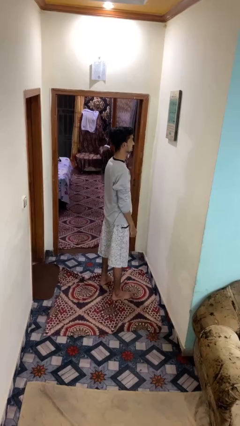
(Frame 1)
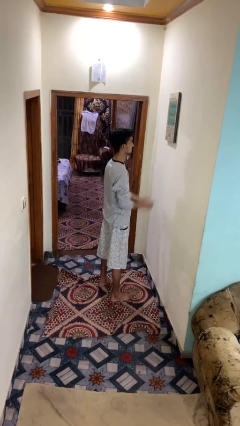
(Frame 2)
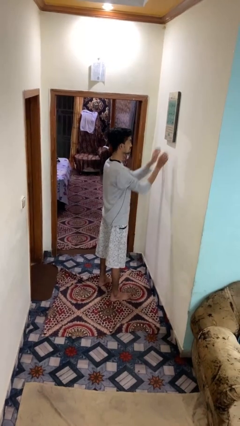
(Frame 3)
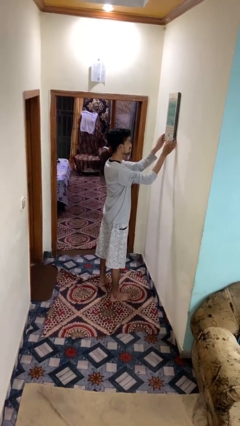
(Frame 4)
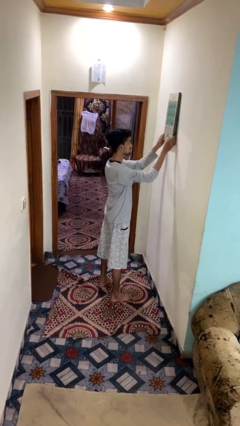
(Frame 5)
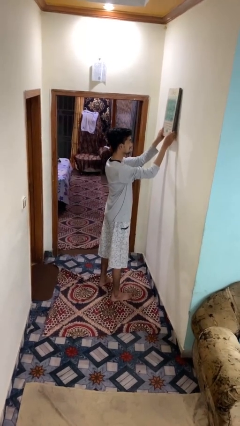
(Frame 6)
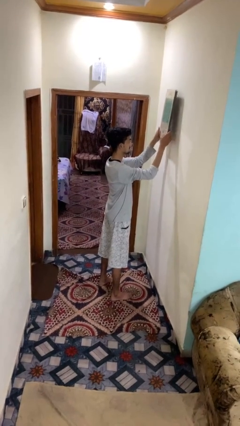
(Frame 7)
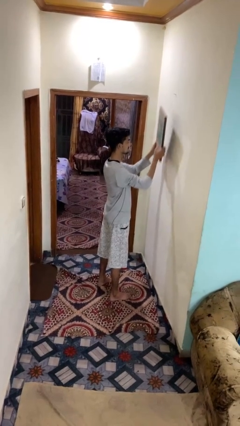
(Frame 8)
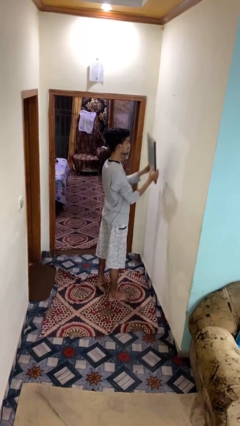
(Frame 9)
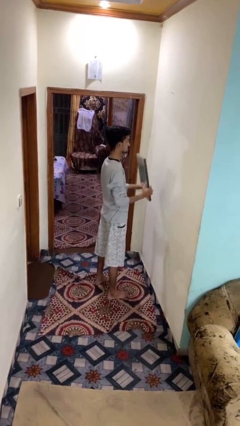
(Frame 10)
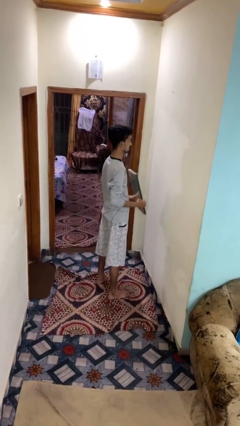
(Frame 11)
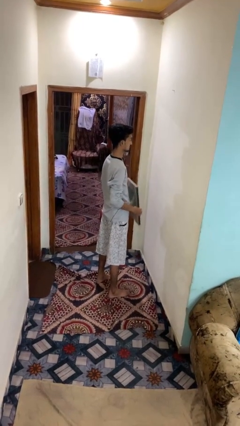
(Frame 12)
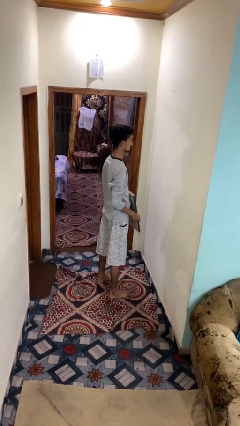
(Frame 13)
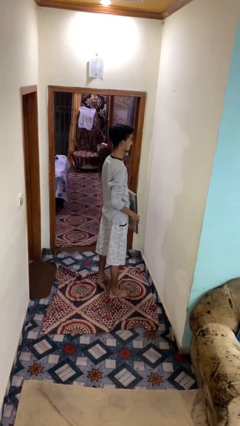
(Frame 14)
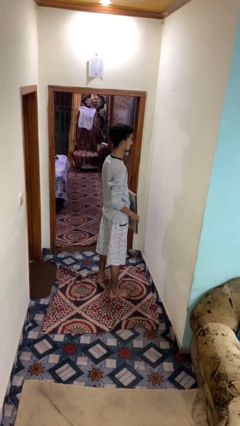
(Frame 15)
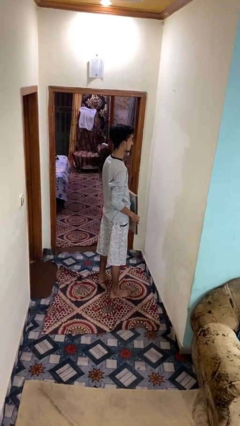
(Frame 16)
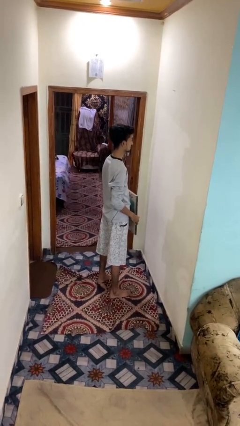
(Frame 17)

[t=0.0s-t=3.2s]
person takes down picture frame

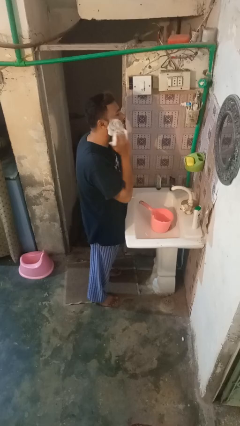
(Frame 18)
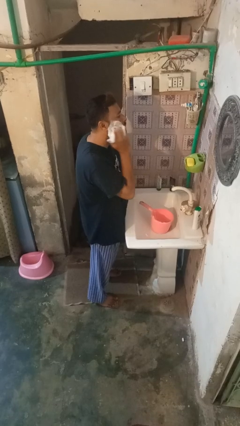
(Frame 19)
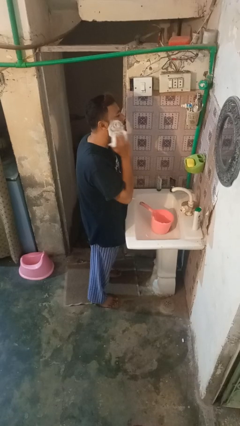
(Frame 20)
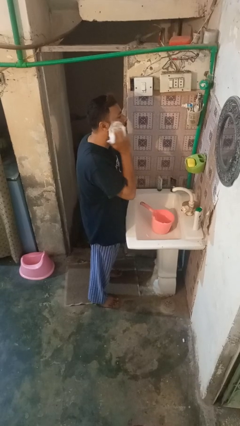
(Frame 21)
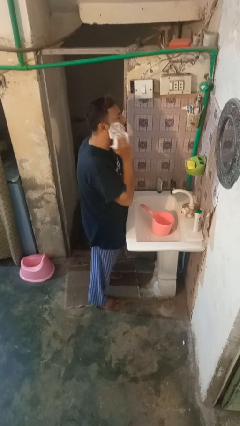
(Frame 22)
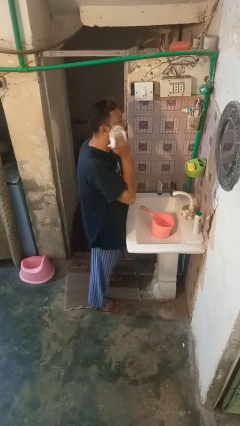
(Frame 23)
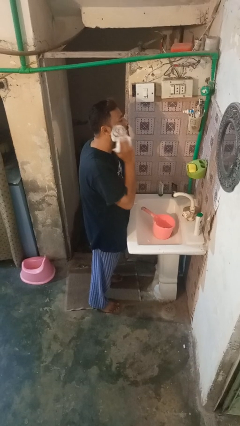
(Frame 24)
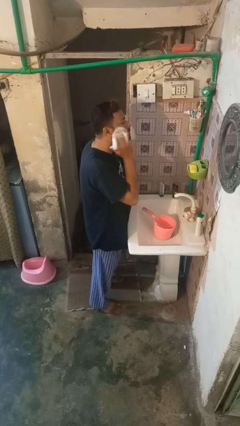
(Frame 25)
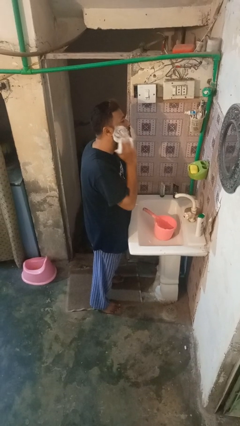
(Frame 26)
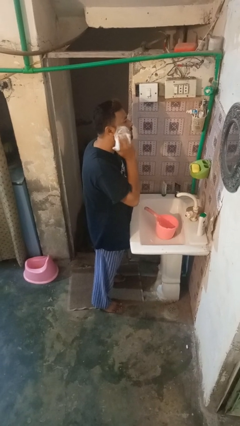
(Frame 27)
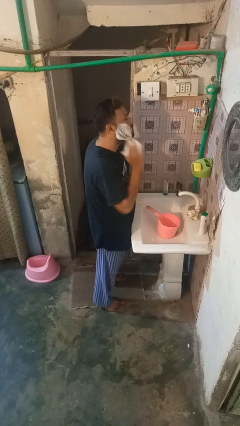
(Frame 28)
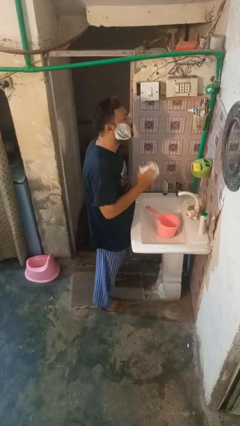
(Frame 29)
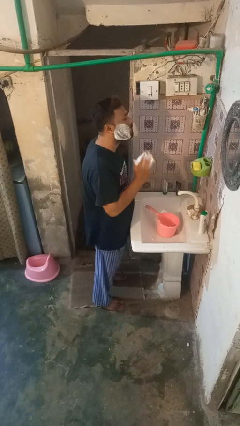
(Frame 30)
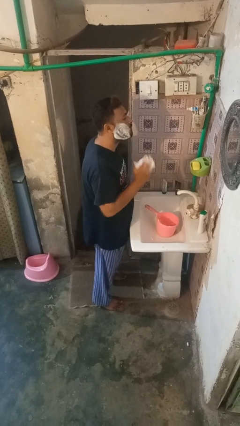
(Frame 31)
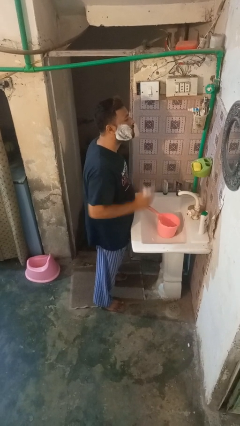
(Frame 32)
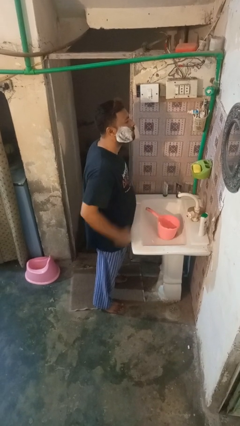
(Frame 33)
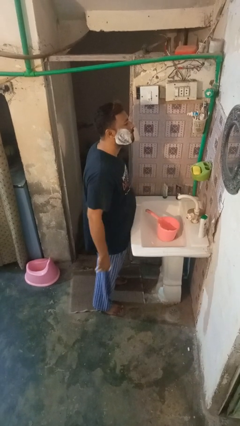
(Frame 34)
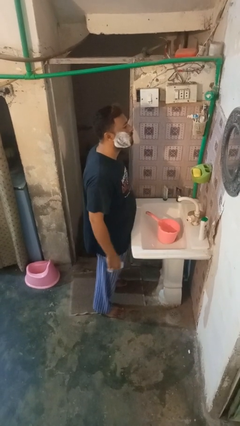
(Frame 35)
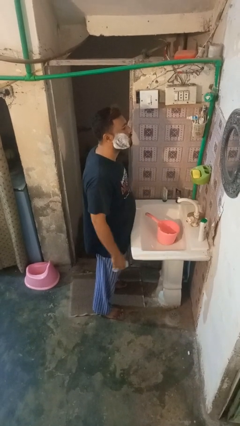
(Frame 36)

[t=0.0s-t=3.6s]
person shaves face

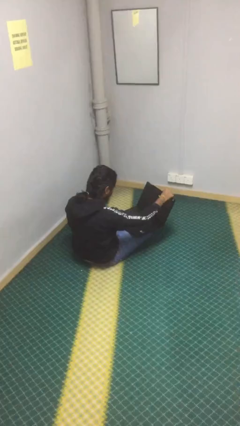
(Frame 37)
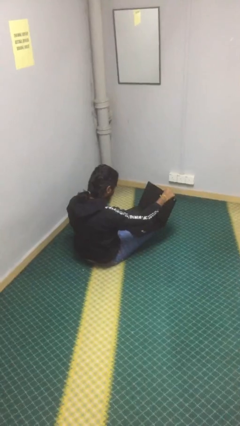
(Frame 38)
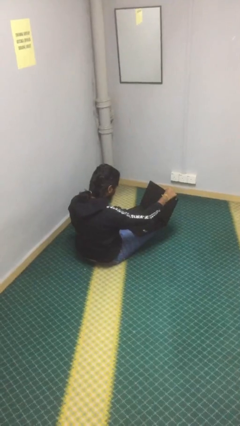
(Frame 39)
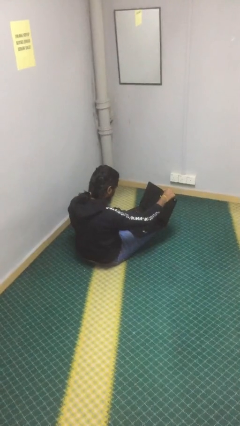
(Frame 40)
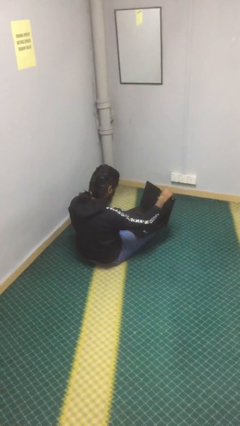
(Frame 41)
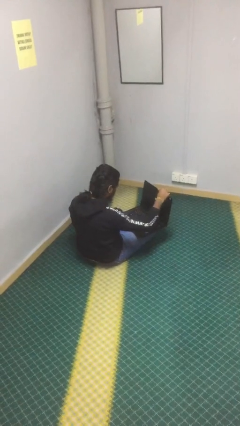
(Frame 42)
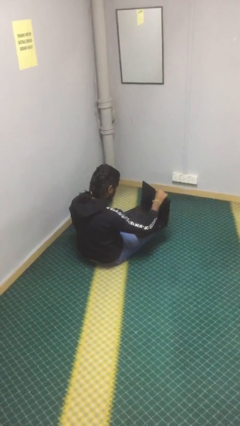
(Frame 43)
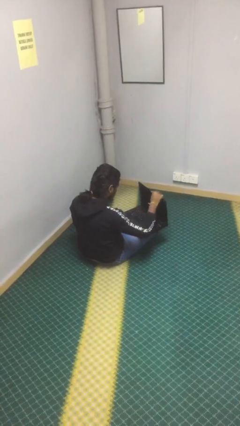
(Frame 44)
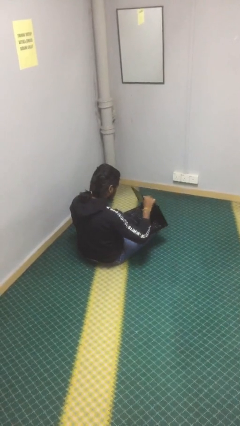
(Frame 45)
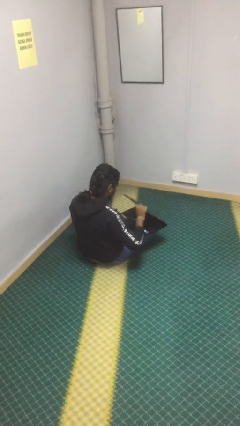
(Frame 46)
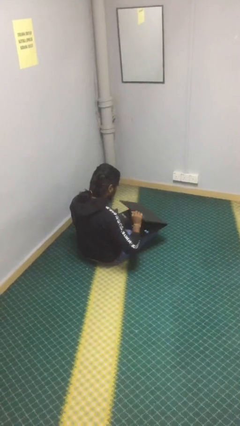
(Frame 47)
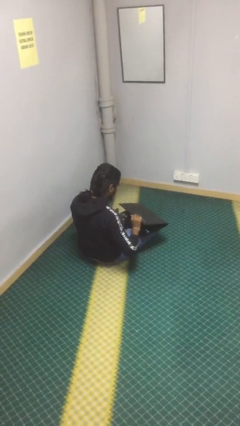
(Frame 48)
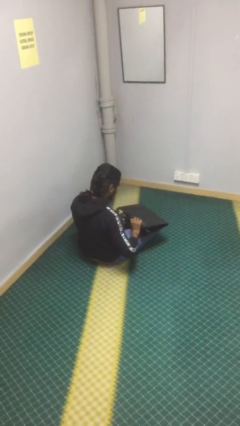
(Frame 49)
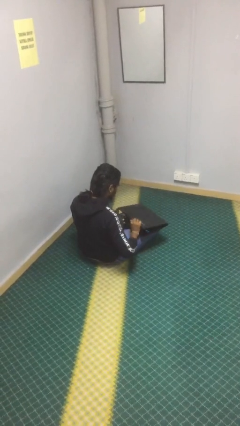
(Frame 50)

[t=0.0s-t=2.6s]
person closes laptop

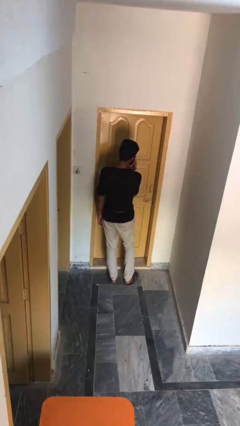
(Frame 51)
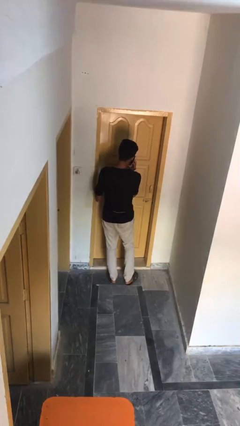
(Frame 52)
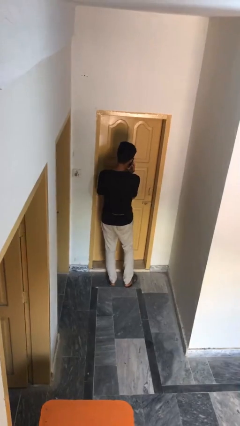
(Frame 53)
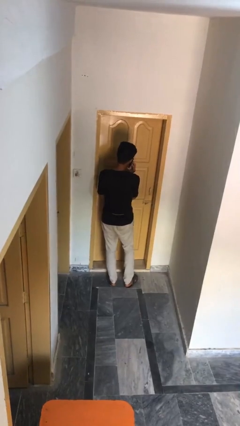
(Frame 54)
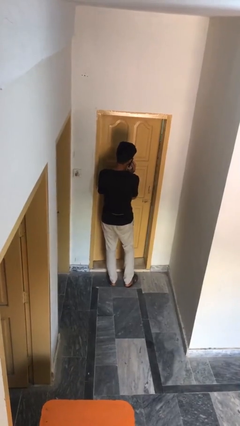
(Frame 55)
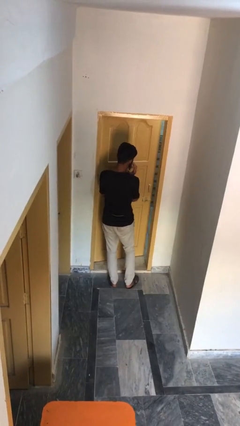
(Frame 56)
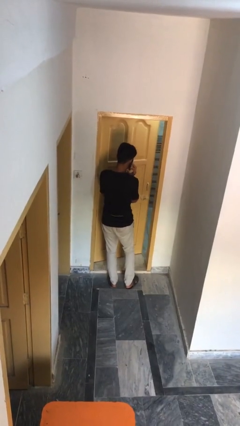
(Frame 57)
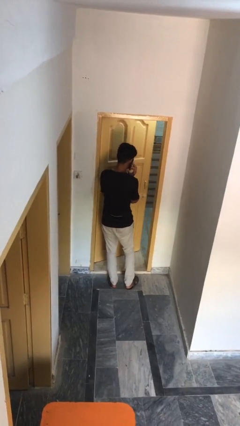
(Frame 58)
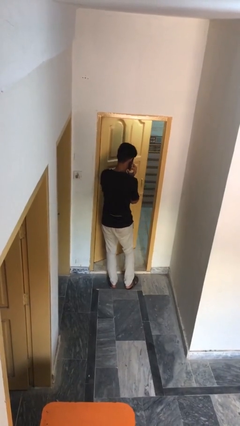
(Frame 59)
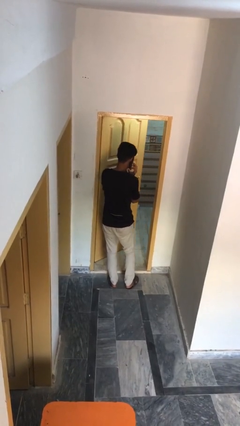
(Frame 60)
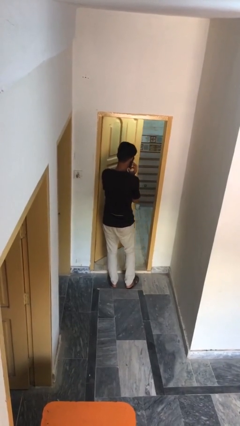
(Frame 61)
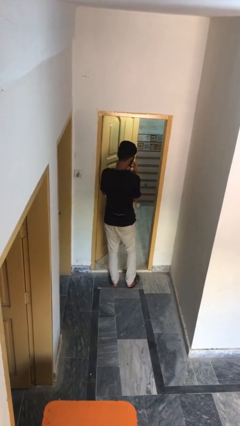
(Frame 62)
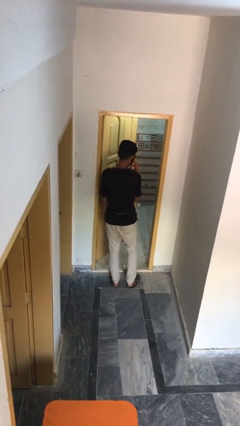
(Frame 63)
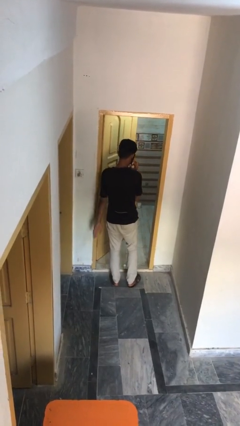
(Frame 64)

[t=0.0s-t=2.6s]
person opens facility door

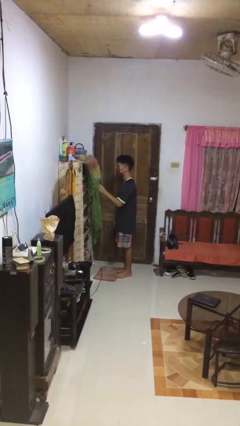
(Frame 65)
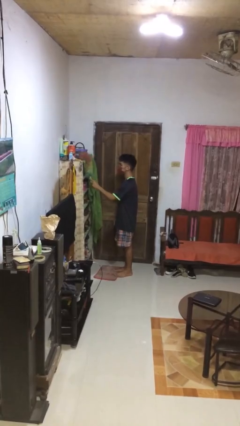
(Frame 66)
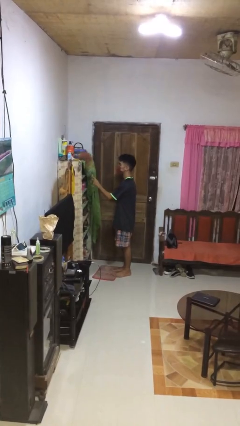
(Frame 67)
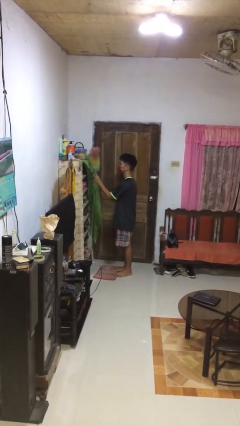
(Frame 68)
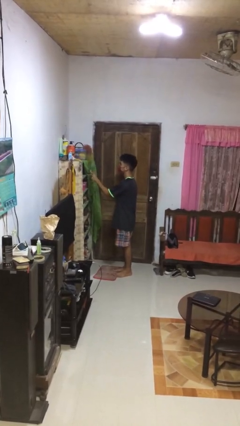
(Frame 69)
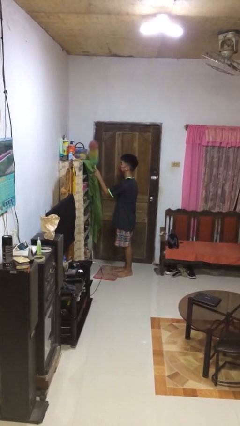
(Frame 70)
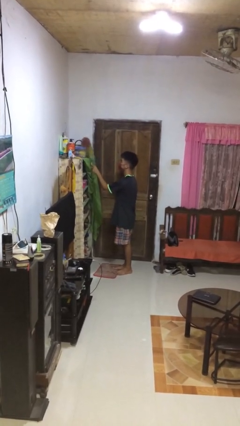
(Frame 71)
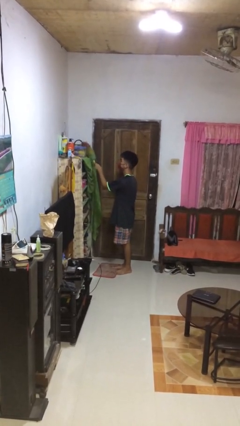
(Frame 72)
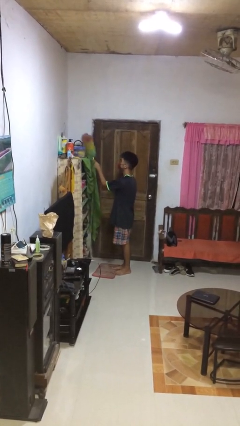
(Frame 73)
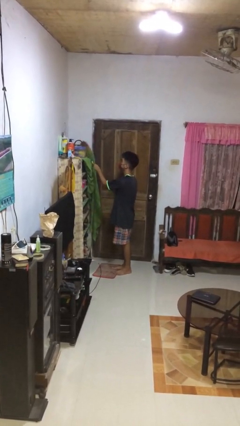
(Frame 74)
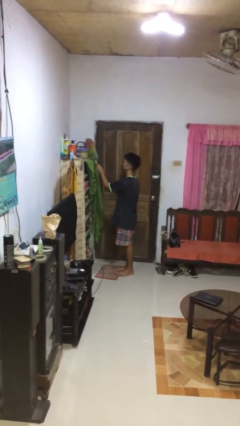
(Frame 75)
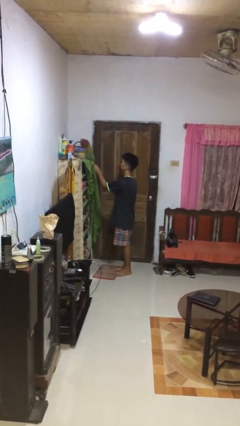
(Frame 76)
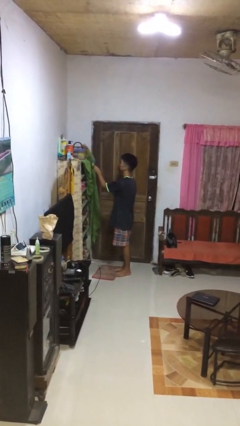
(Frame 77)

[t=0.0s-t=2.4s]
person dusts furniture

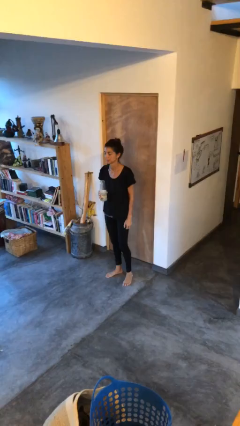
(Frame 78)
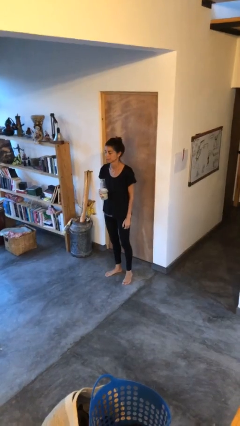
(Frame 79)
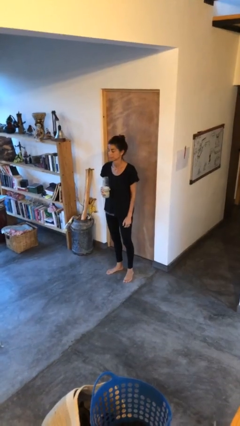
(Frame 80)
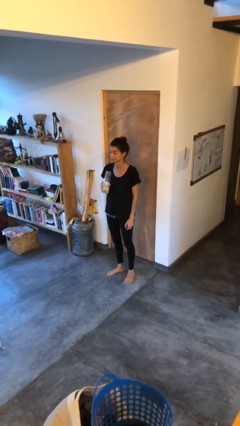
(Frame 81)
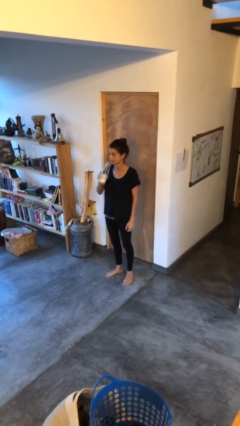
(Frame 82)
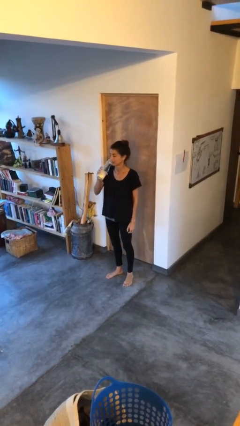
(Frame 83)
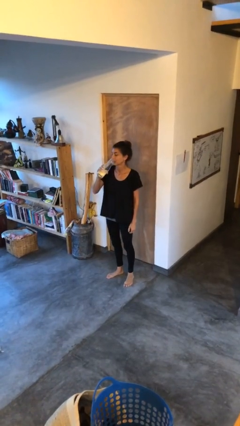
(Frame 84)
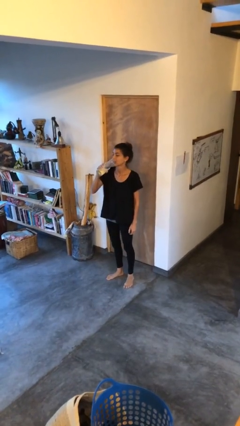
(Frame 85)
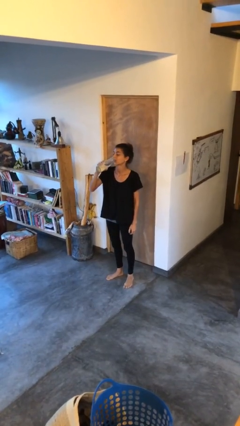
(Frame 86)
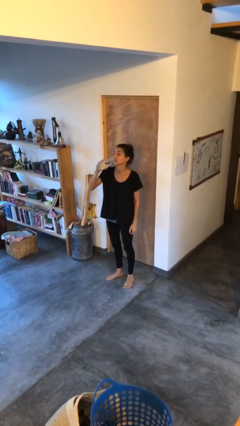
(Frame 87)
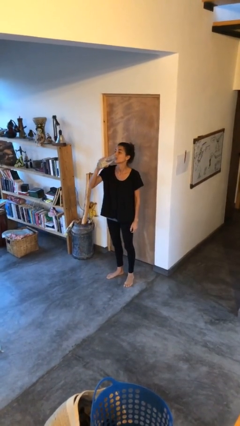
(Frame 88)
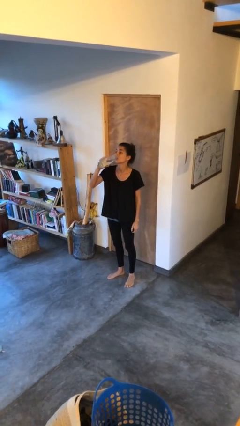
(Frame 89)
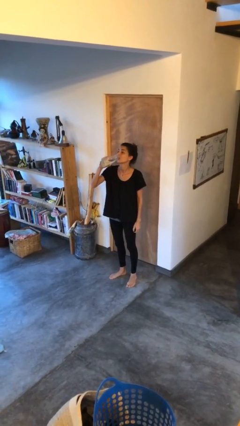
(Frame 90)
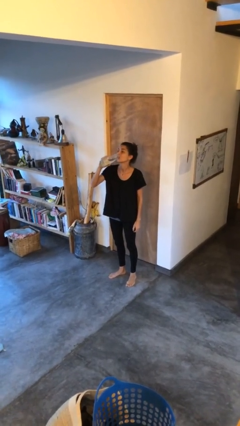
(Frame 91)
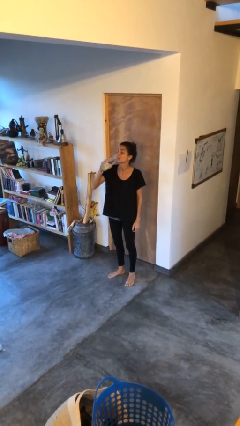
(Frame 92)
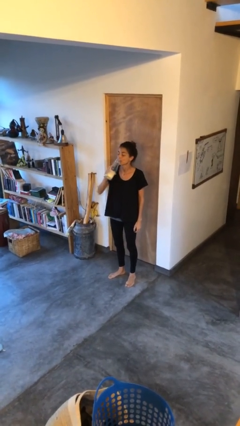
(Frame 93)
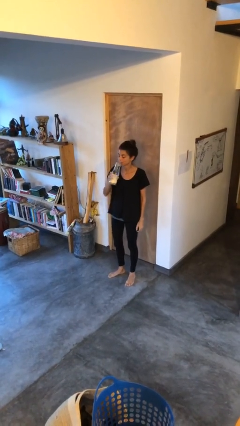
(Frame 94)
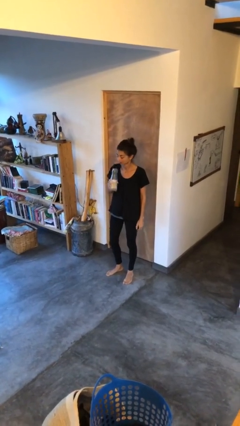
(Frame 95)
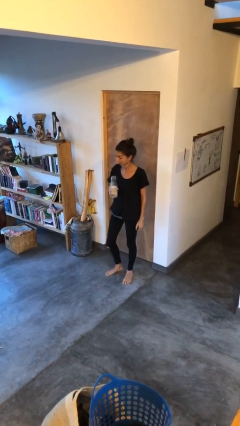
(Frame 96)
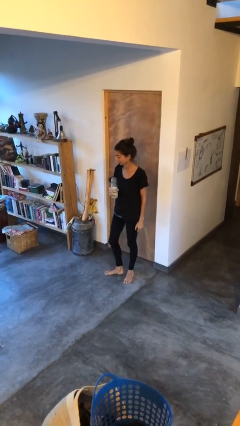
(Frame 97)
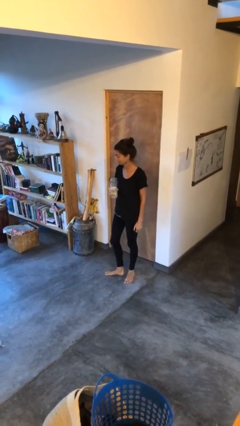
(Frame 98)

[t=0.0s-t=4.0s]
person drinks from bottle
